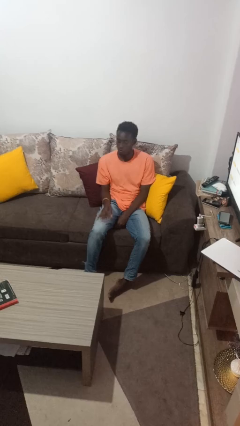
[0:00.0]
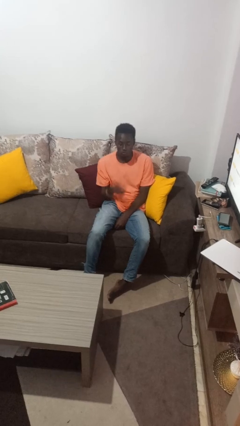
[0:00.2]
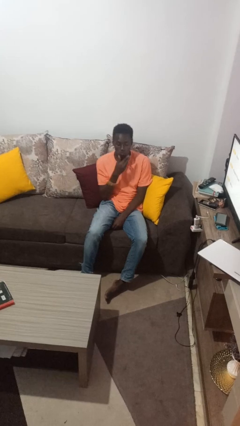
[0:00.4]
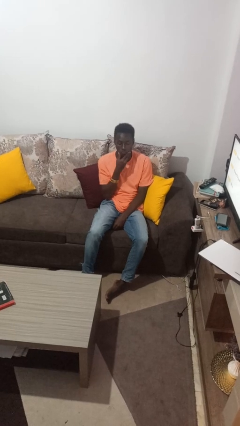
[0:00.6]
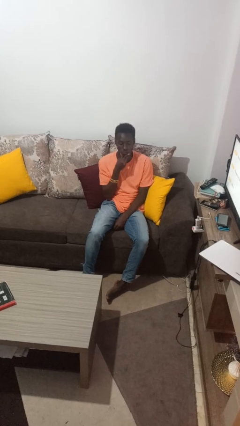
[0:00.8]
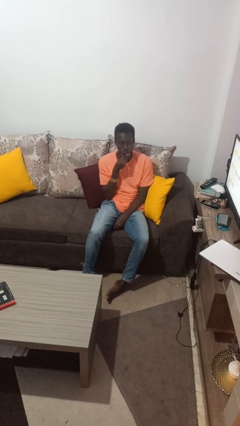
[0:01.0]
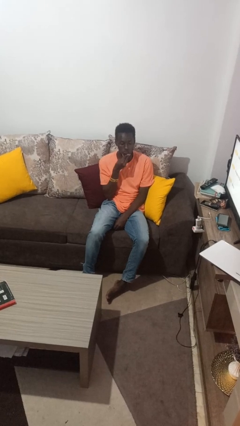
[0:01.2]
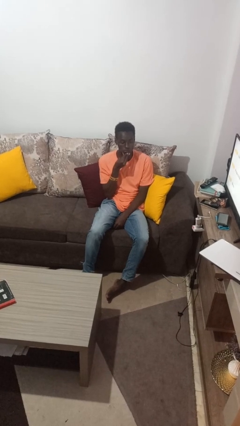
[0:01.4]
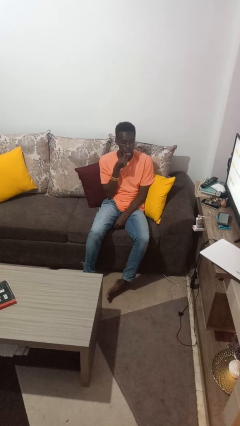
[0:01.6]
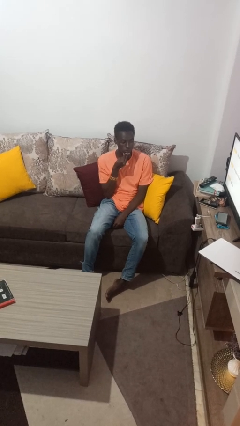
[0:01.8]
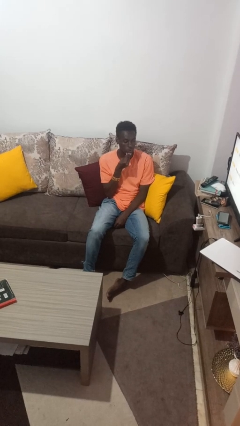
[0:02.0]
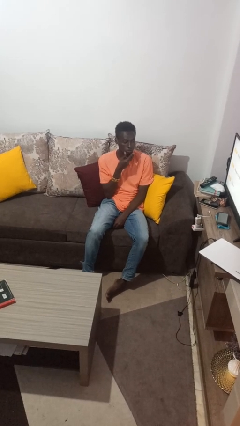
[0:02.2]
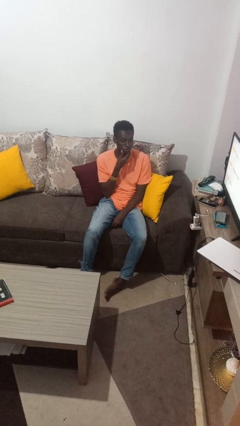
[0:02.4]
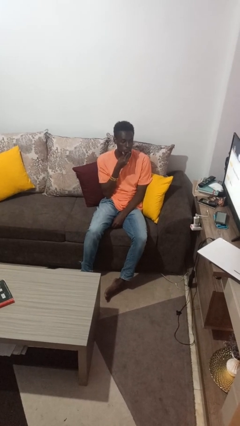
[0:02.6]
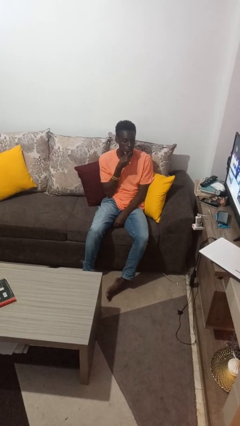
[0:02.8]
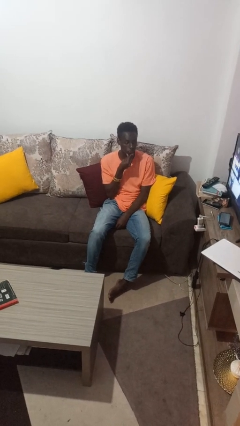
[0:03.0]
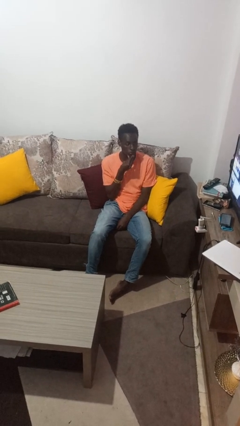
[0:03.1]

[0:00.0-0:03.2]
person strokes chin

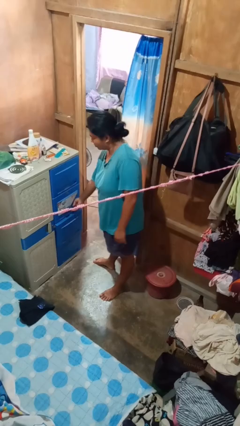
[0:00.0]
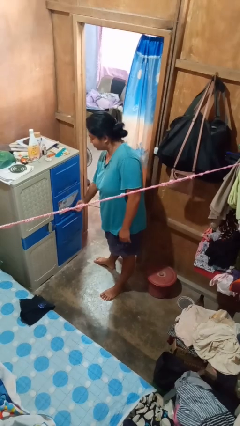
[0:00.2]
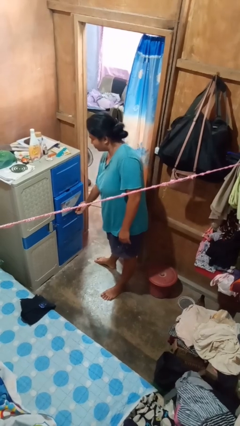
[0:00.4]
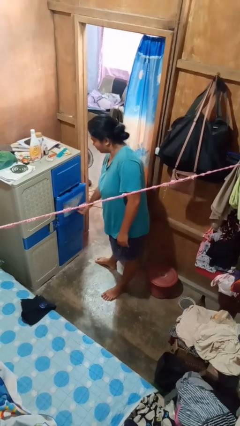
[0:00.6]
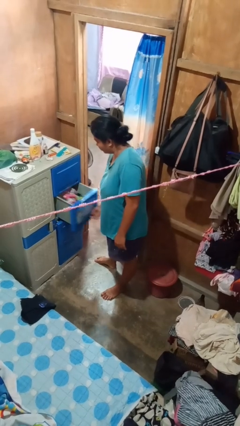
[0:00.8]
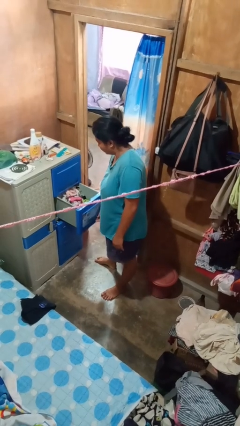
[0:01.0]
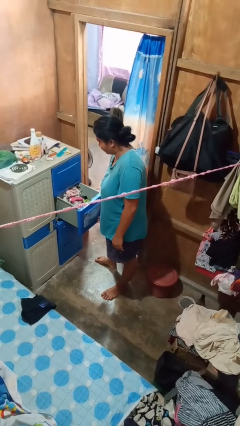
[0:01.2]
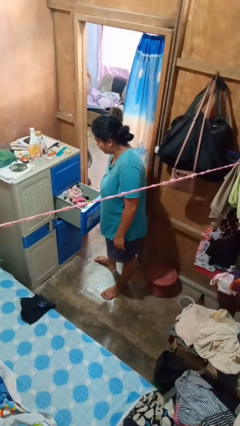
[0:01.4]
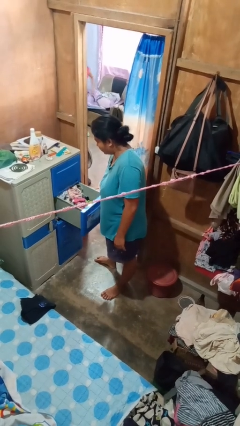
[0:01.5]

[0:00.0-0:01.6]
person opens dresser drawer

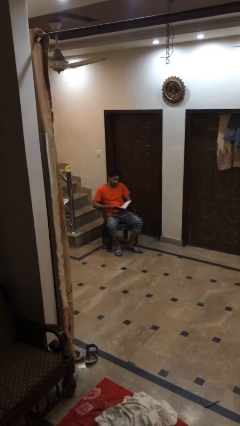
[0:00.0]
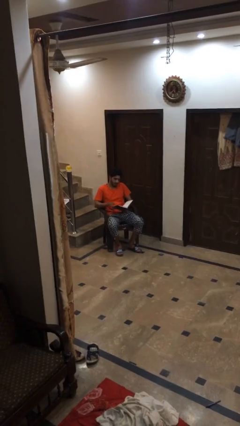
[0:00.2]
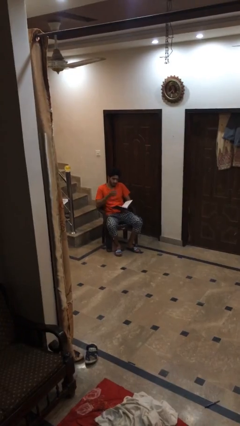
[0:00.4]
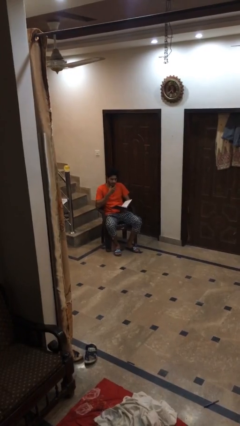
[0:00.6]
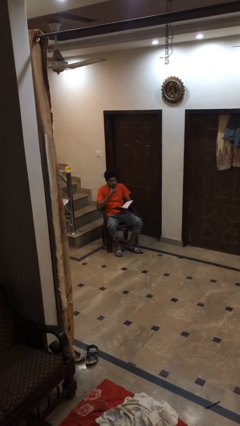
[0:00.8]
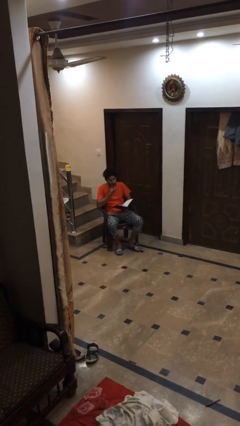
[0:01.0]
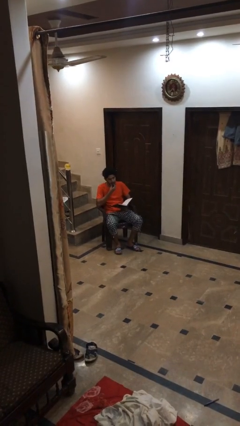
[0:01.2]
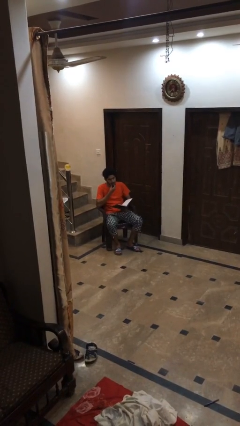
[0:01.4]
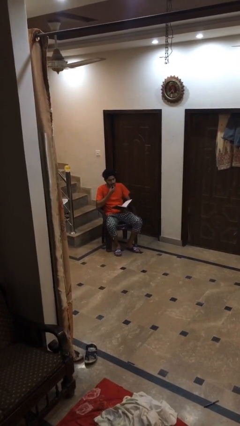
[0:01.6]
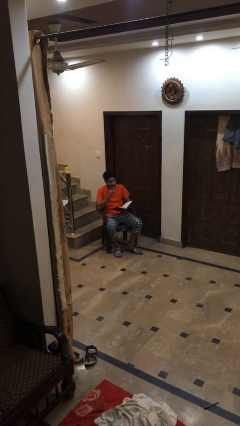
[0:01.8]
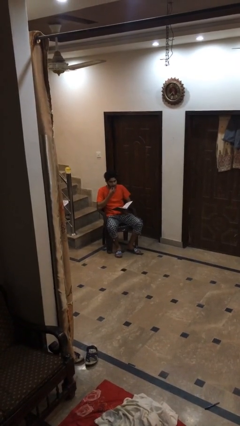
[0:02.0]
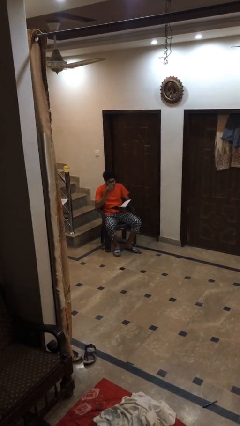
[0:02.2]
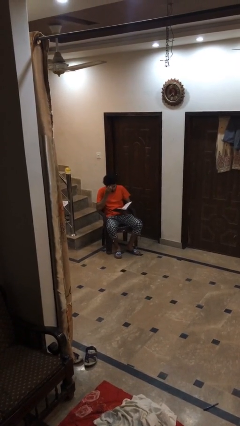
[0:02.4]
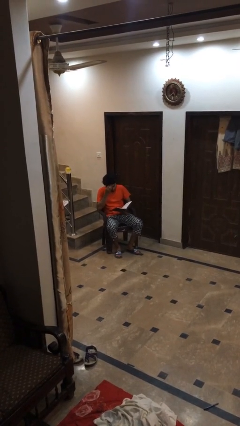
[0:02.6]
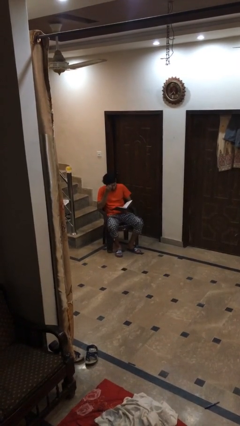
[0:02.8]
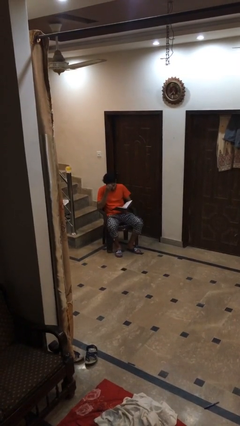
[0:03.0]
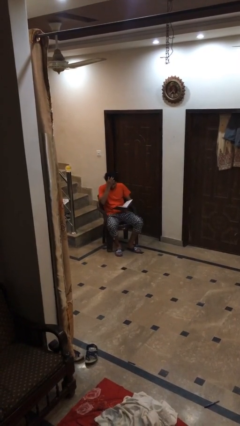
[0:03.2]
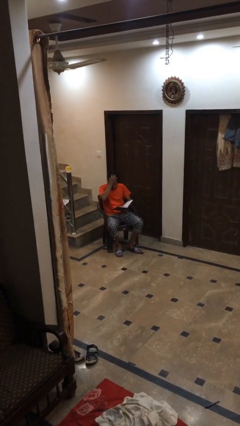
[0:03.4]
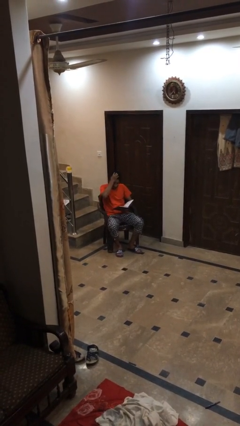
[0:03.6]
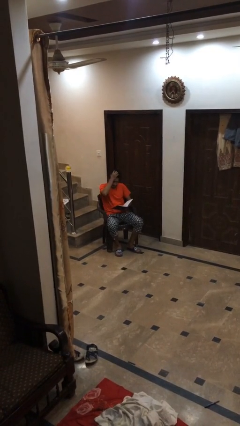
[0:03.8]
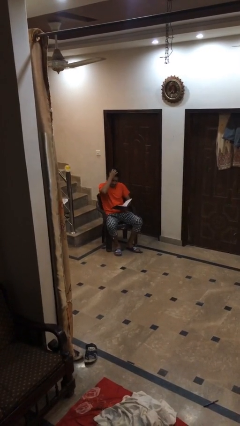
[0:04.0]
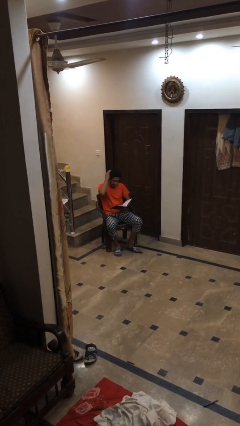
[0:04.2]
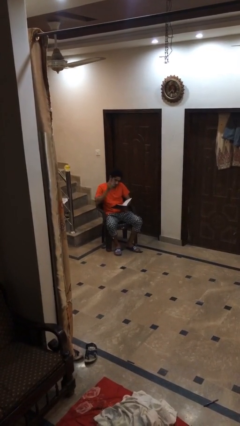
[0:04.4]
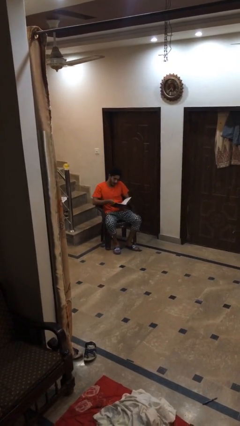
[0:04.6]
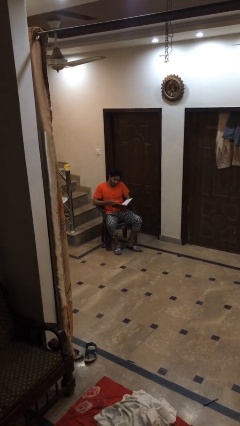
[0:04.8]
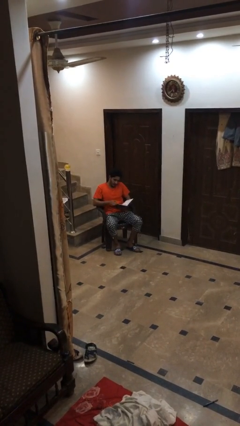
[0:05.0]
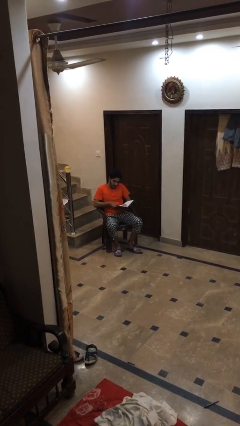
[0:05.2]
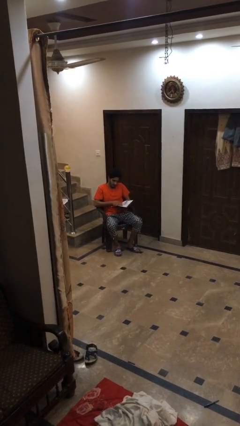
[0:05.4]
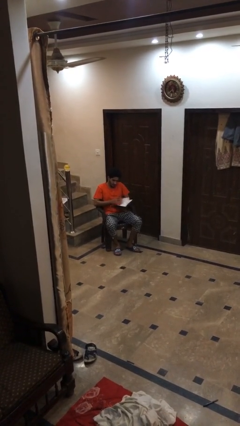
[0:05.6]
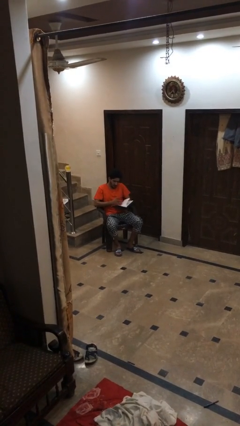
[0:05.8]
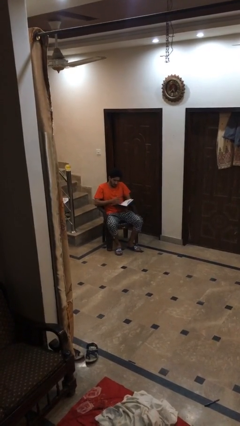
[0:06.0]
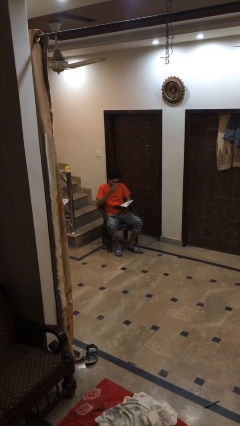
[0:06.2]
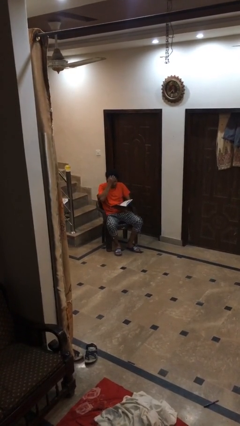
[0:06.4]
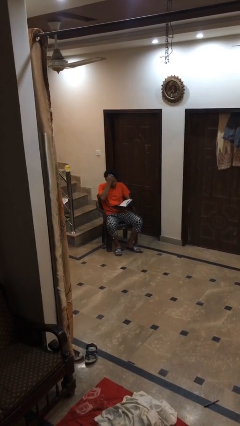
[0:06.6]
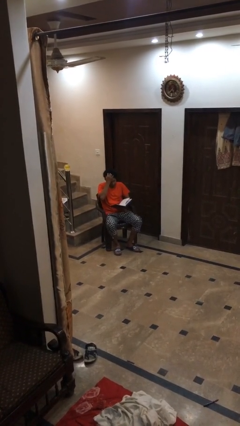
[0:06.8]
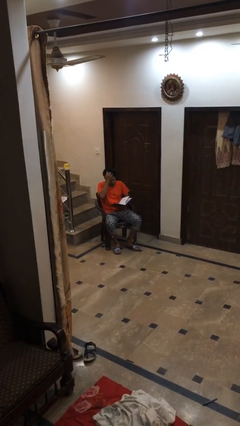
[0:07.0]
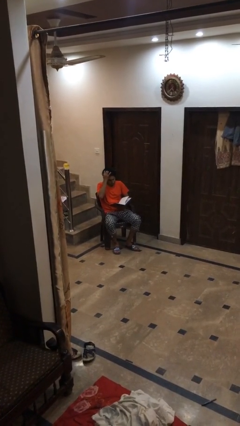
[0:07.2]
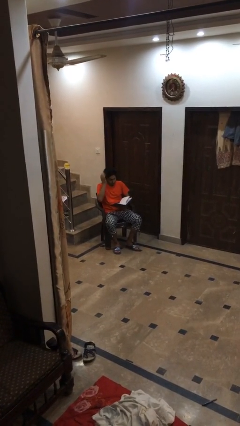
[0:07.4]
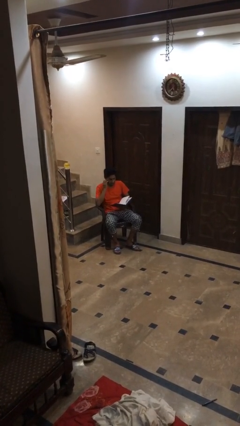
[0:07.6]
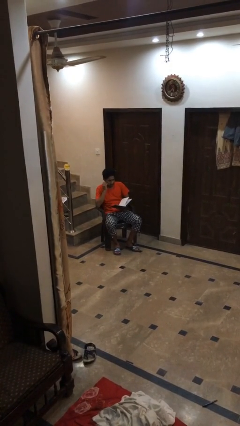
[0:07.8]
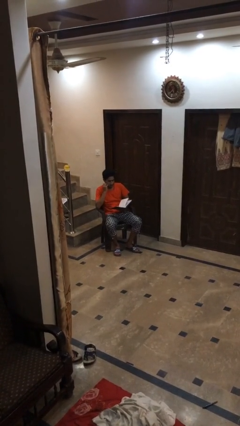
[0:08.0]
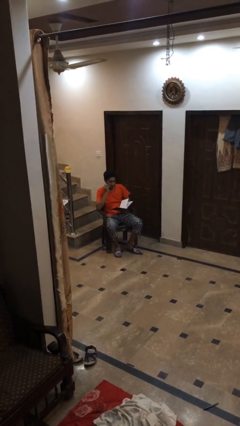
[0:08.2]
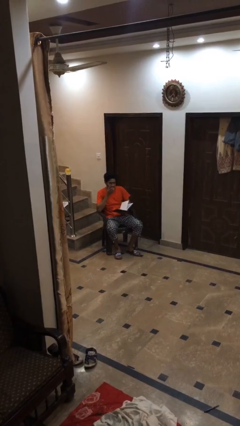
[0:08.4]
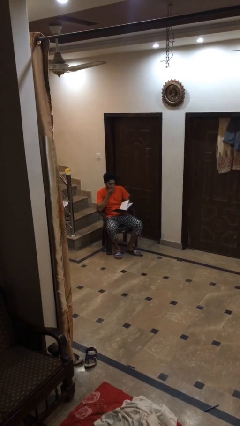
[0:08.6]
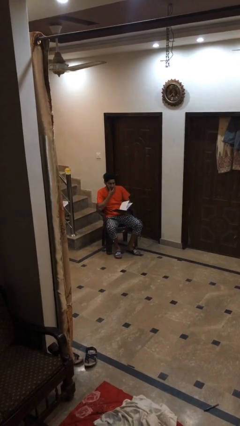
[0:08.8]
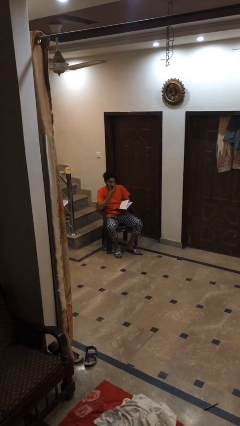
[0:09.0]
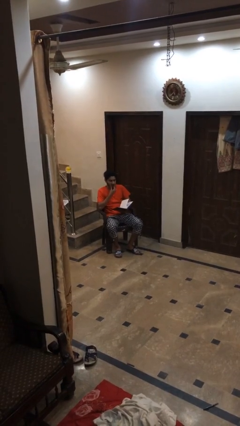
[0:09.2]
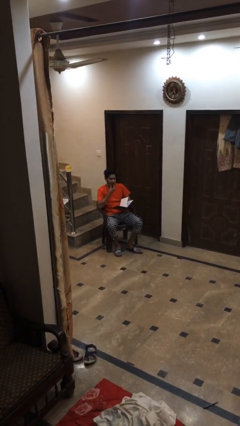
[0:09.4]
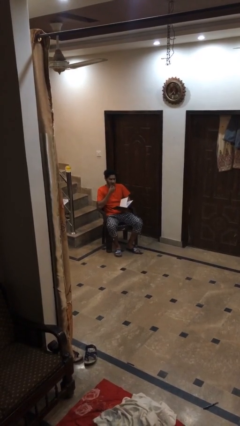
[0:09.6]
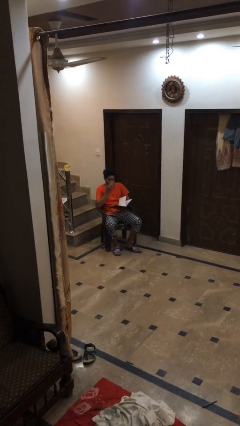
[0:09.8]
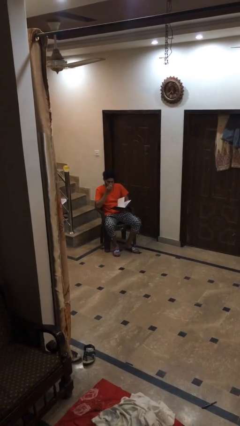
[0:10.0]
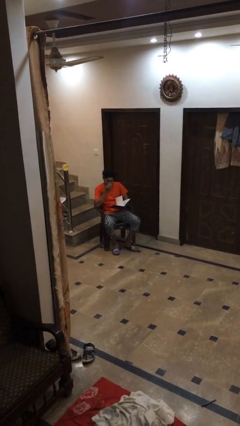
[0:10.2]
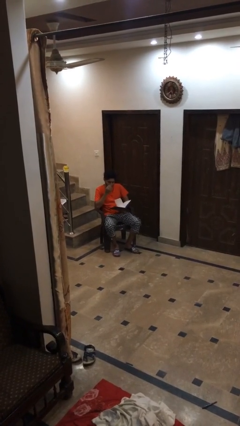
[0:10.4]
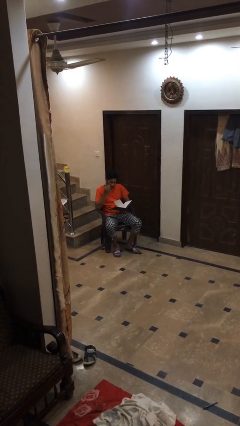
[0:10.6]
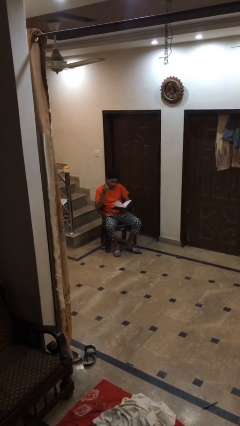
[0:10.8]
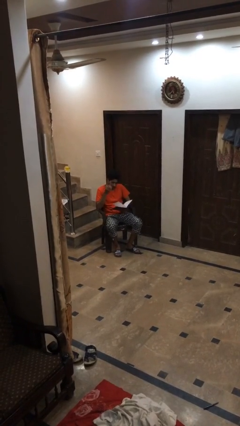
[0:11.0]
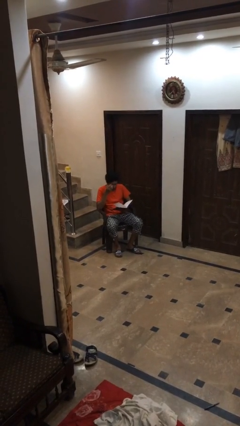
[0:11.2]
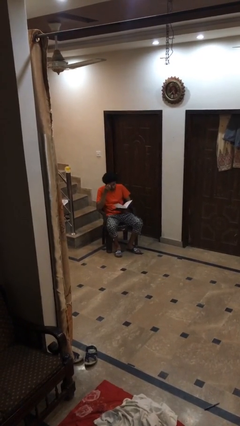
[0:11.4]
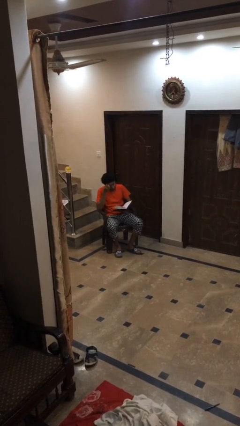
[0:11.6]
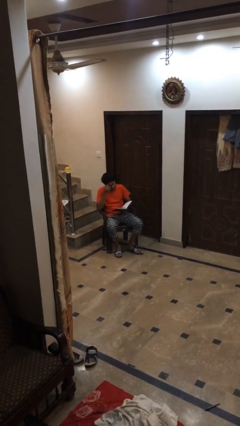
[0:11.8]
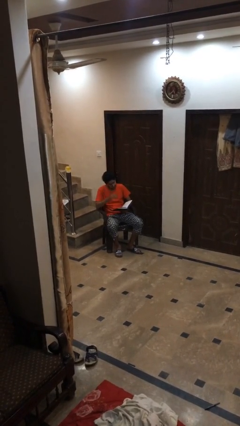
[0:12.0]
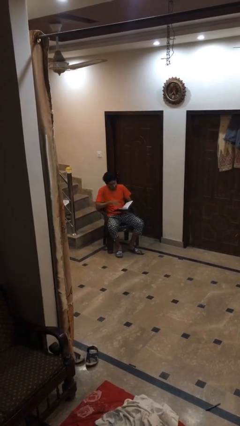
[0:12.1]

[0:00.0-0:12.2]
person reads document

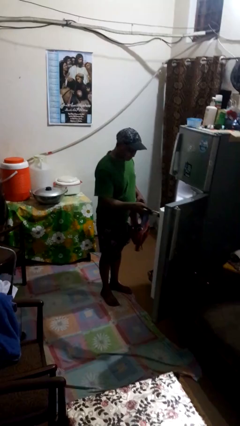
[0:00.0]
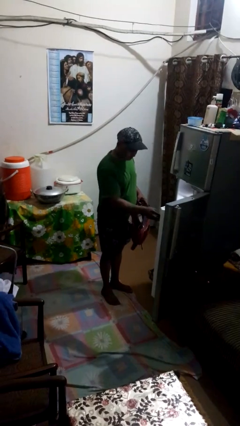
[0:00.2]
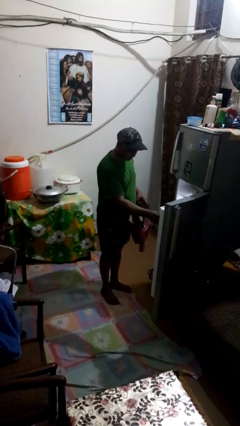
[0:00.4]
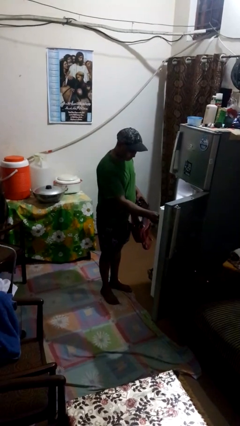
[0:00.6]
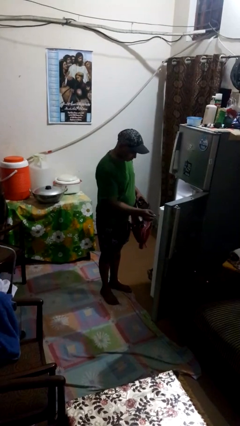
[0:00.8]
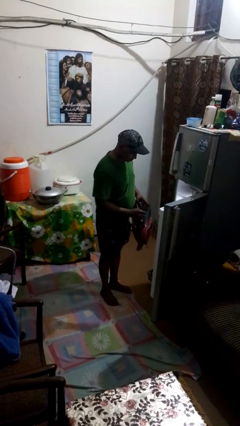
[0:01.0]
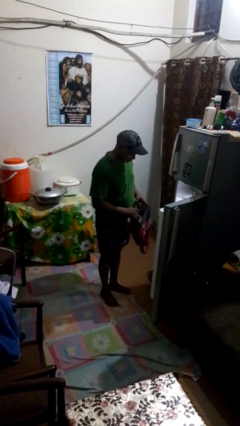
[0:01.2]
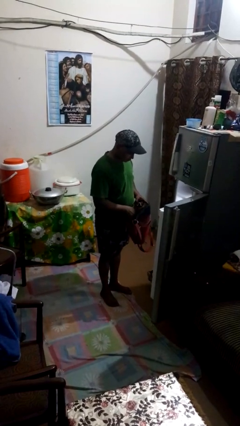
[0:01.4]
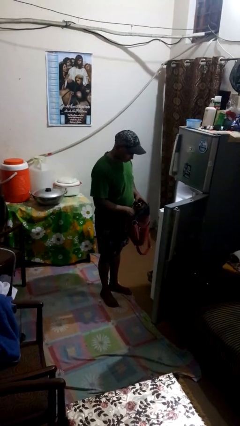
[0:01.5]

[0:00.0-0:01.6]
person loads groceries into refrigerator
